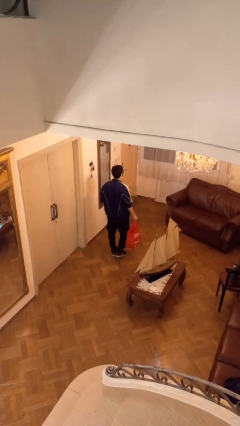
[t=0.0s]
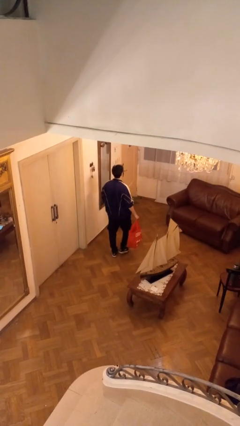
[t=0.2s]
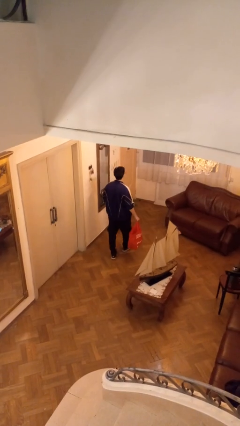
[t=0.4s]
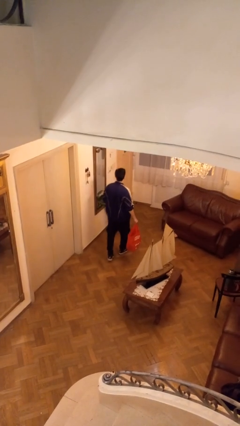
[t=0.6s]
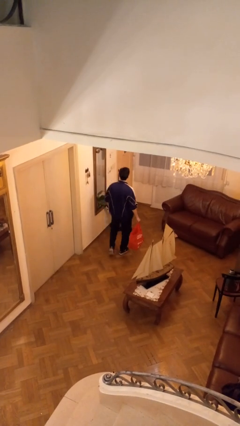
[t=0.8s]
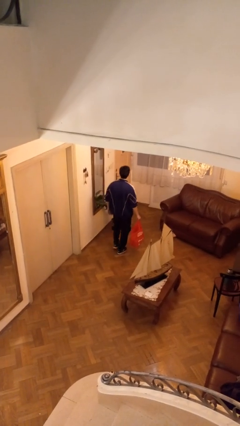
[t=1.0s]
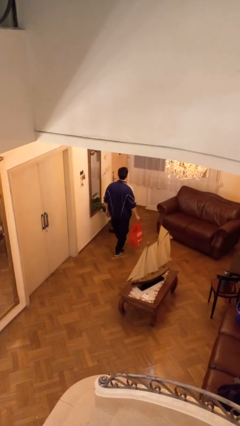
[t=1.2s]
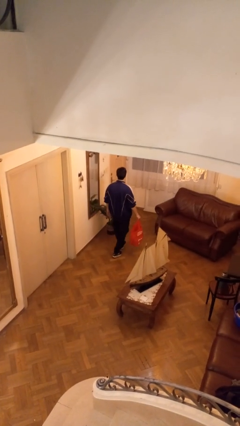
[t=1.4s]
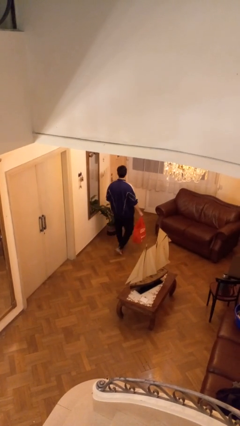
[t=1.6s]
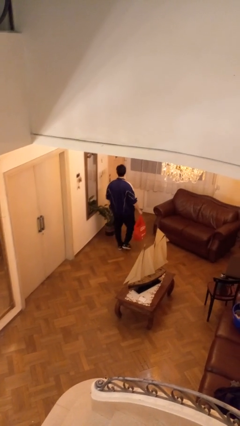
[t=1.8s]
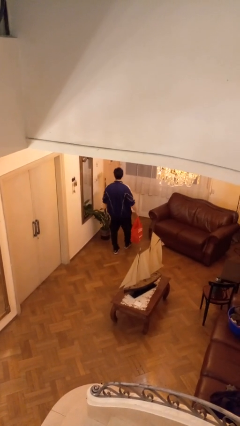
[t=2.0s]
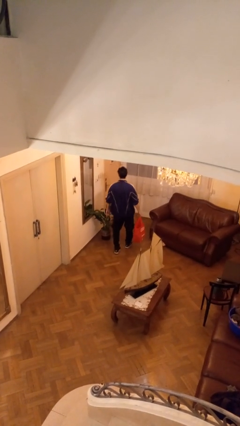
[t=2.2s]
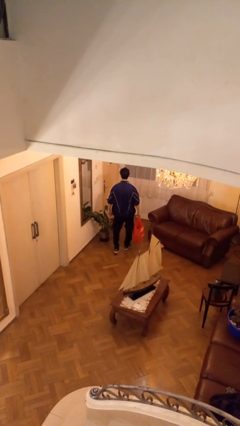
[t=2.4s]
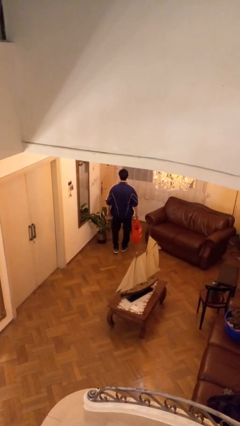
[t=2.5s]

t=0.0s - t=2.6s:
person carries groceries

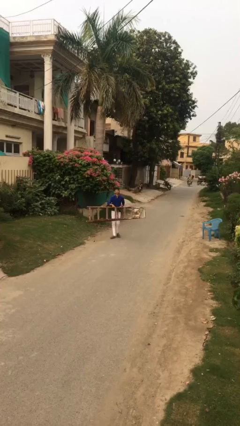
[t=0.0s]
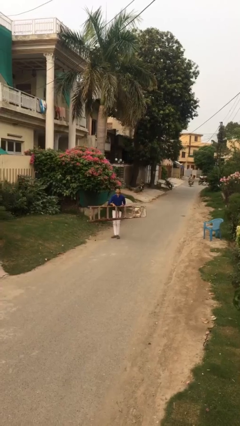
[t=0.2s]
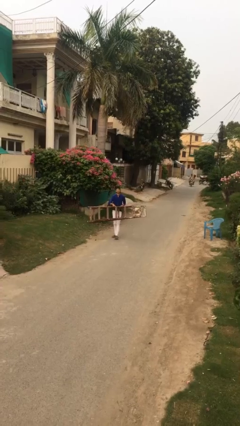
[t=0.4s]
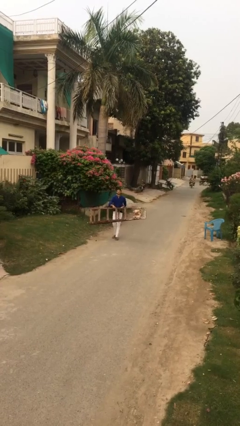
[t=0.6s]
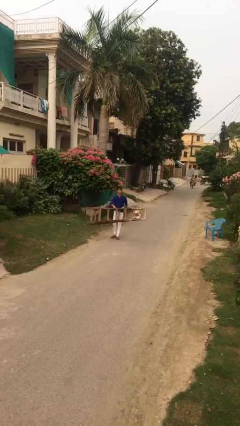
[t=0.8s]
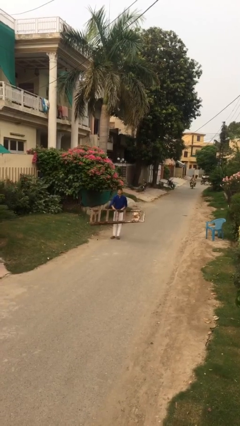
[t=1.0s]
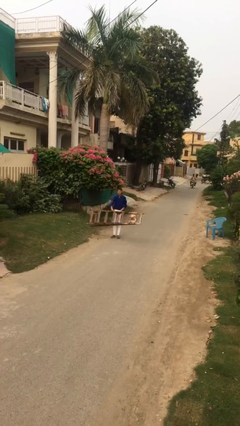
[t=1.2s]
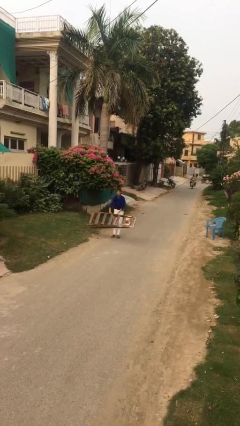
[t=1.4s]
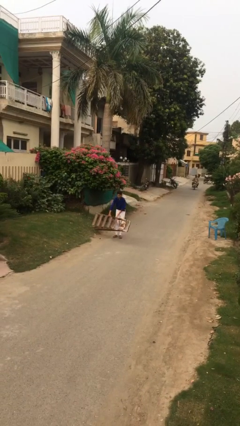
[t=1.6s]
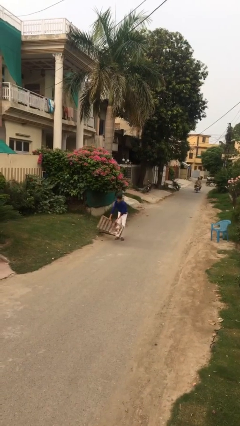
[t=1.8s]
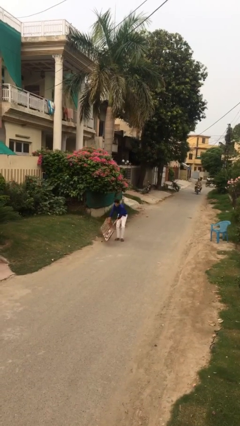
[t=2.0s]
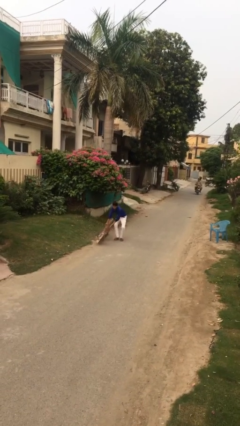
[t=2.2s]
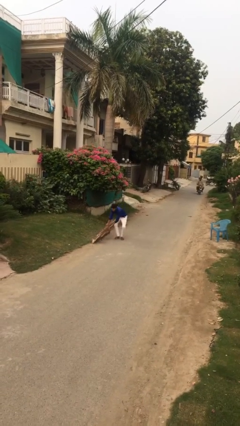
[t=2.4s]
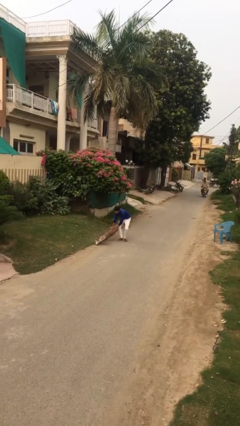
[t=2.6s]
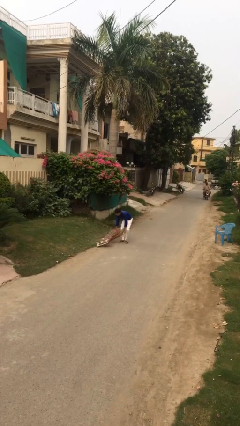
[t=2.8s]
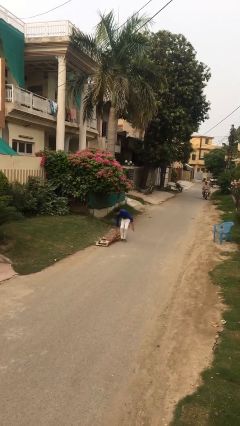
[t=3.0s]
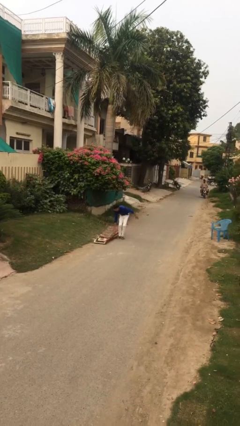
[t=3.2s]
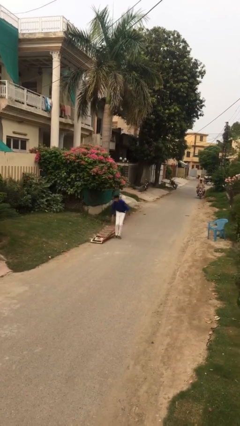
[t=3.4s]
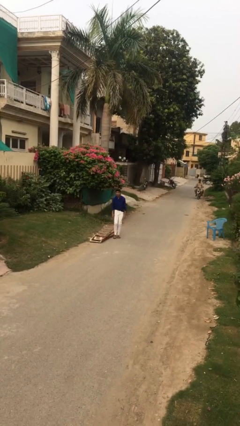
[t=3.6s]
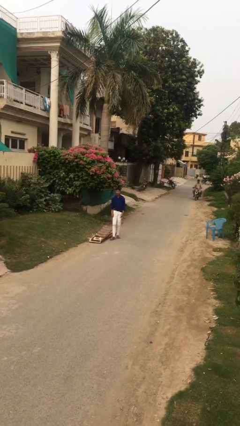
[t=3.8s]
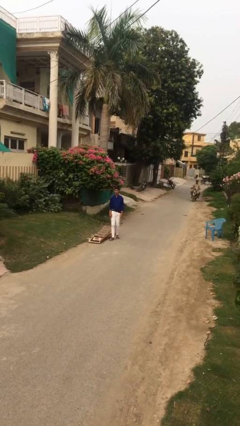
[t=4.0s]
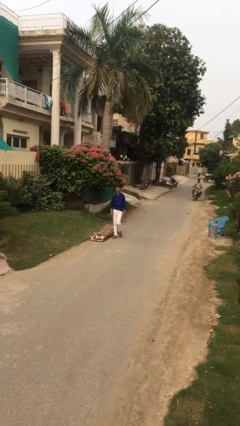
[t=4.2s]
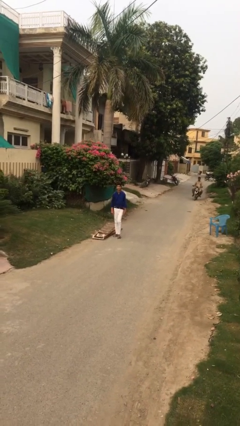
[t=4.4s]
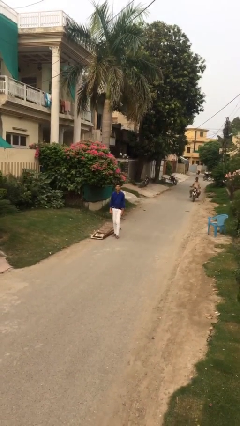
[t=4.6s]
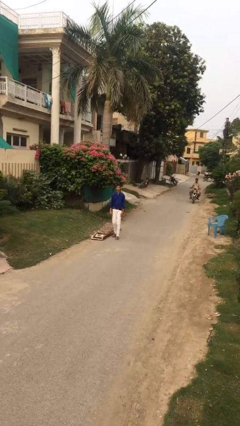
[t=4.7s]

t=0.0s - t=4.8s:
person puts down object on floor

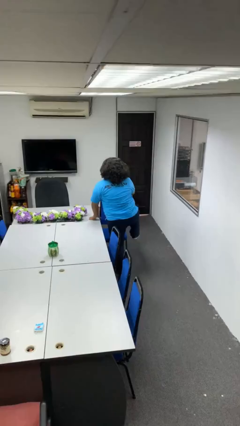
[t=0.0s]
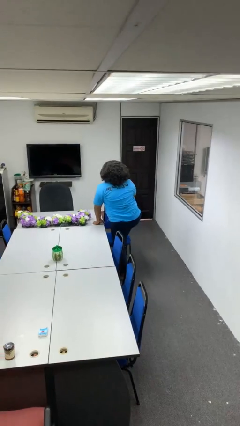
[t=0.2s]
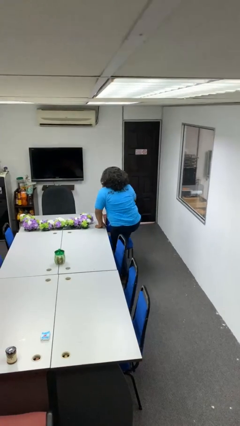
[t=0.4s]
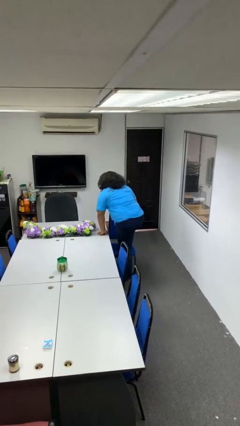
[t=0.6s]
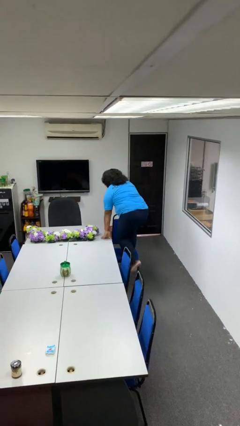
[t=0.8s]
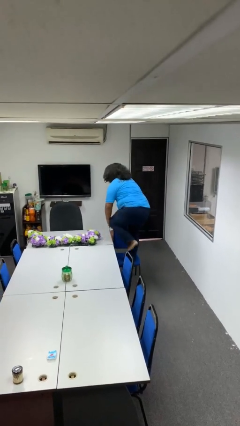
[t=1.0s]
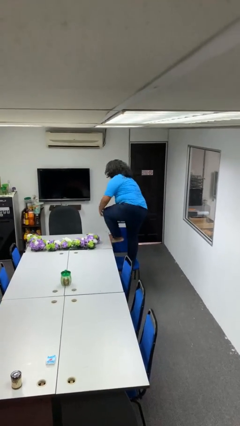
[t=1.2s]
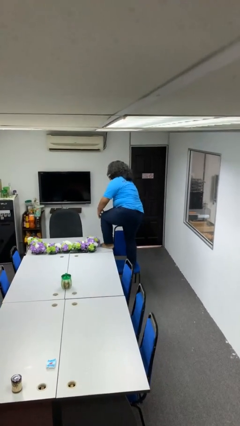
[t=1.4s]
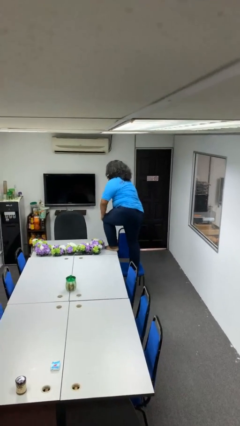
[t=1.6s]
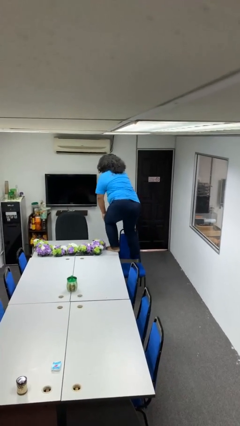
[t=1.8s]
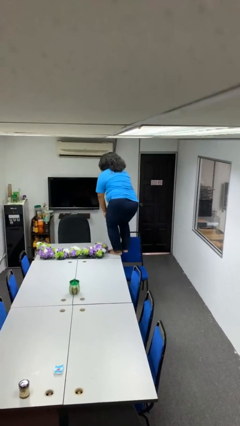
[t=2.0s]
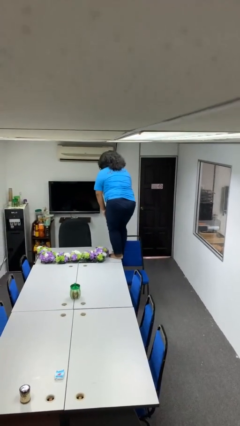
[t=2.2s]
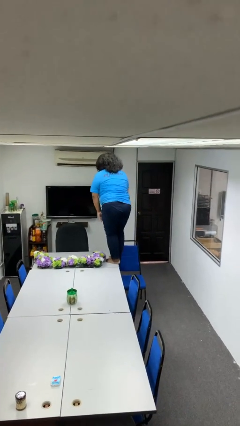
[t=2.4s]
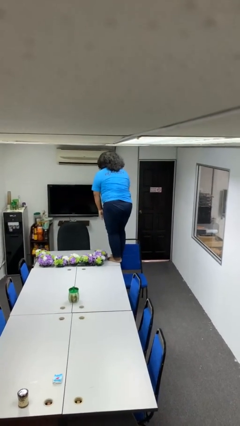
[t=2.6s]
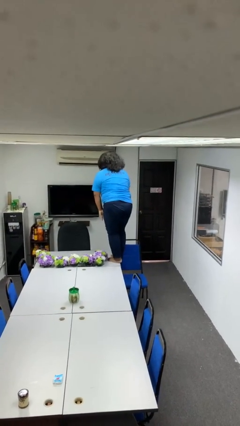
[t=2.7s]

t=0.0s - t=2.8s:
person climbs on table

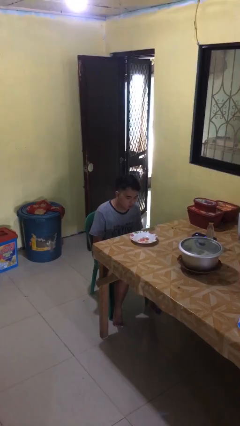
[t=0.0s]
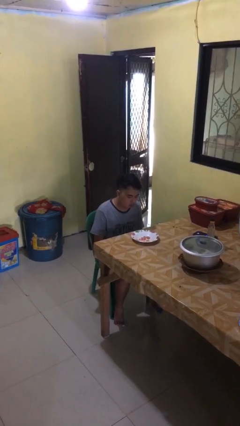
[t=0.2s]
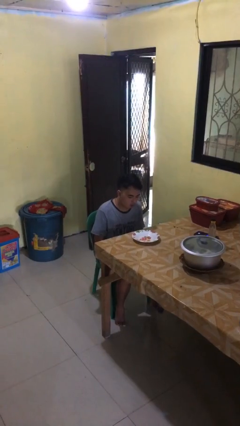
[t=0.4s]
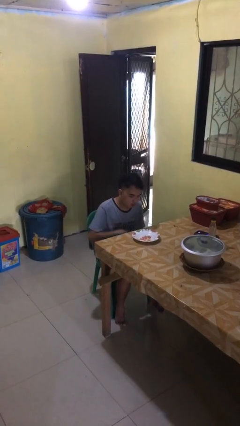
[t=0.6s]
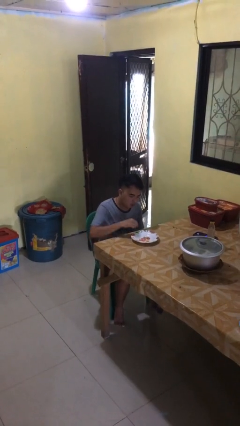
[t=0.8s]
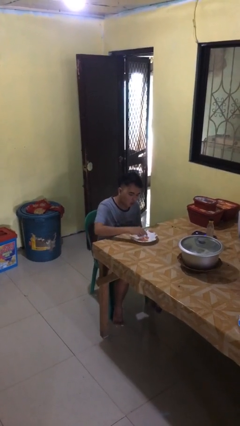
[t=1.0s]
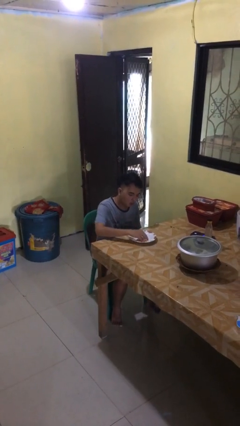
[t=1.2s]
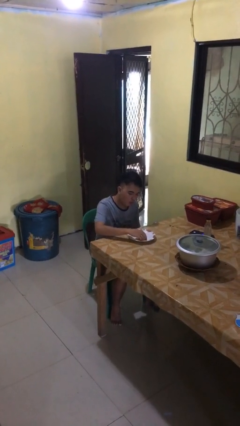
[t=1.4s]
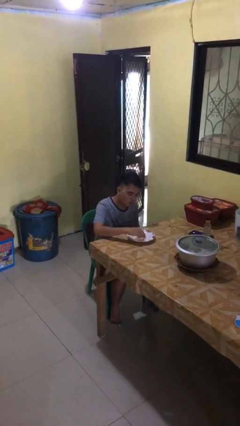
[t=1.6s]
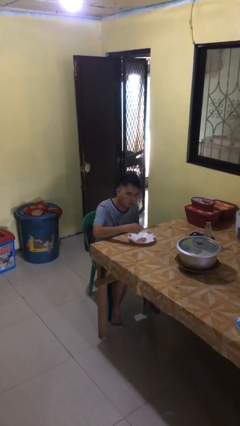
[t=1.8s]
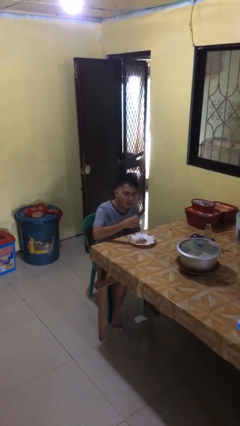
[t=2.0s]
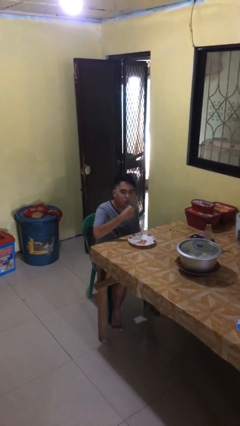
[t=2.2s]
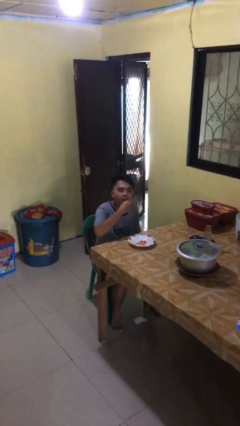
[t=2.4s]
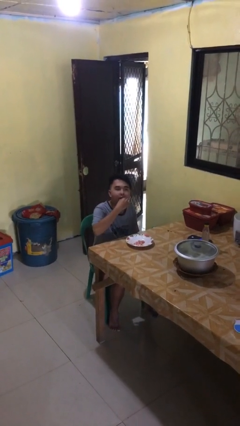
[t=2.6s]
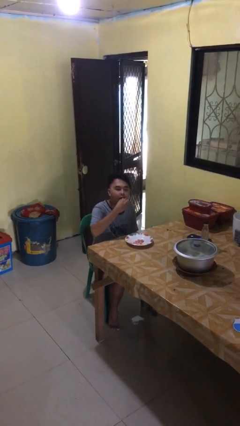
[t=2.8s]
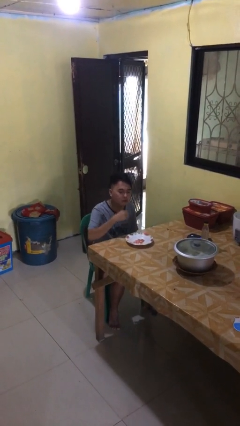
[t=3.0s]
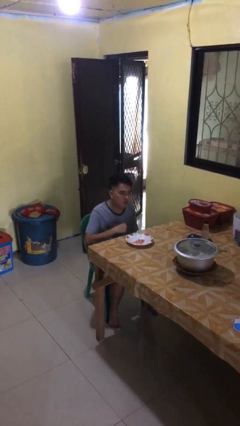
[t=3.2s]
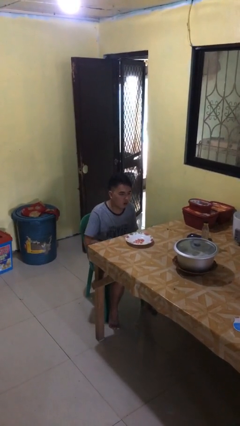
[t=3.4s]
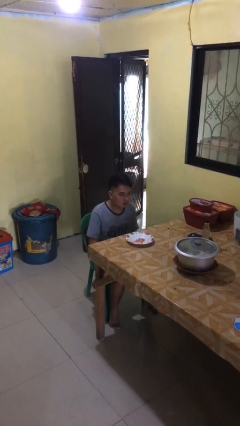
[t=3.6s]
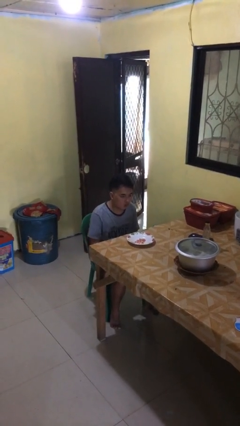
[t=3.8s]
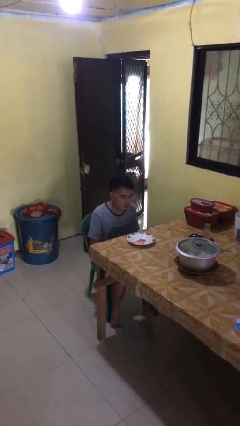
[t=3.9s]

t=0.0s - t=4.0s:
person eats with hands

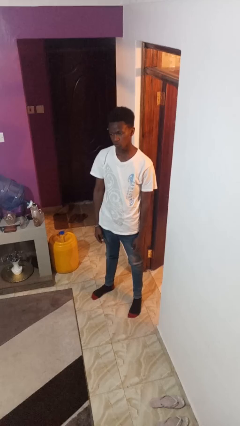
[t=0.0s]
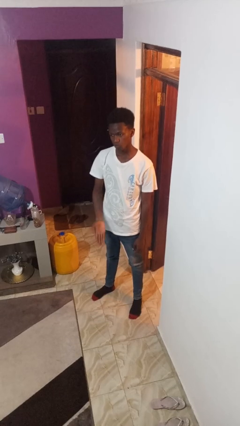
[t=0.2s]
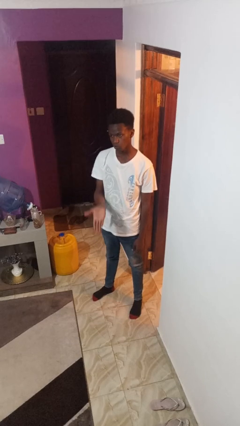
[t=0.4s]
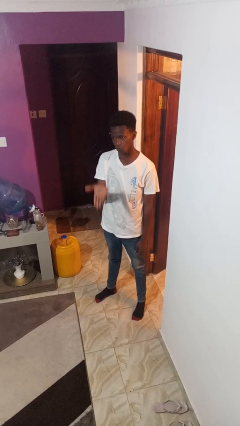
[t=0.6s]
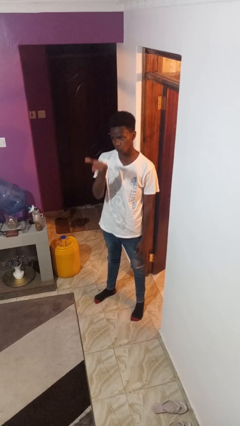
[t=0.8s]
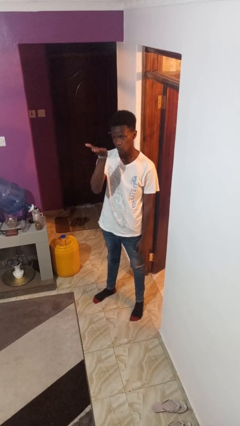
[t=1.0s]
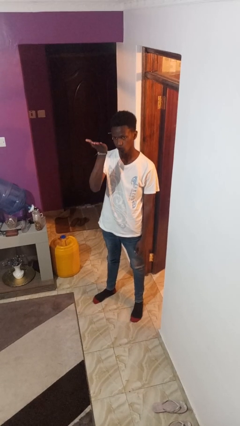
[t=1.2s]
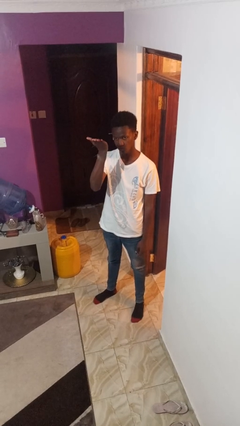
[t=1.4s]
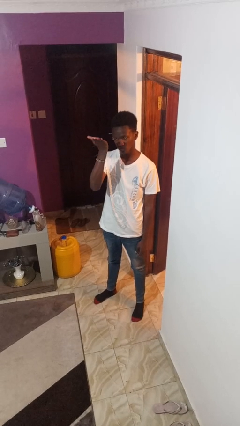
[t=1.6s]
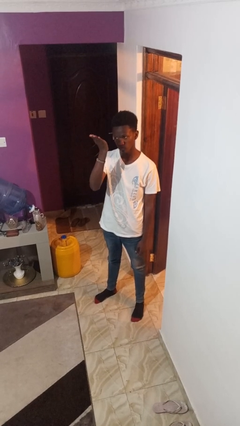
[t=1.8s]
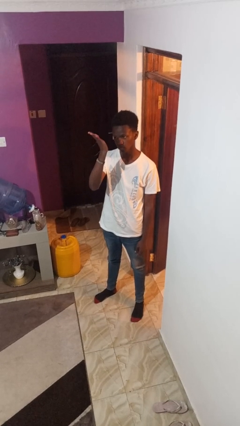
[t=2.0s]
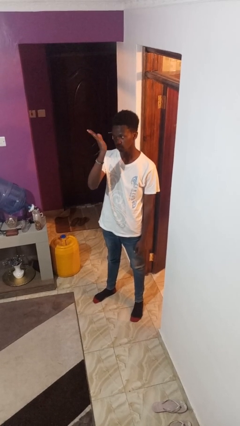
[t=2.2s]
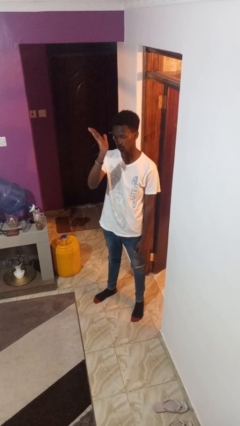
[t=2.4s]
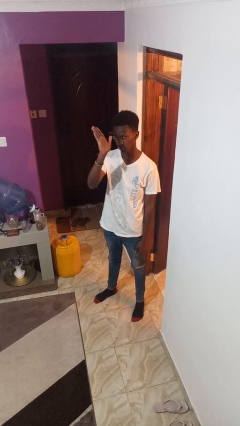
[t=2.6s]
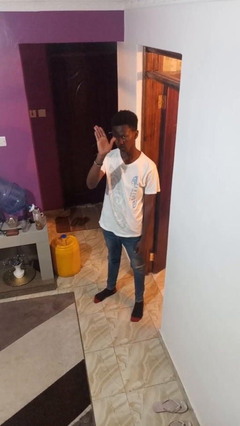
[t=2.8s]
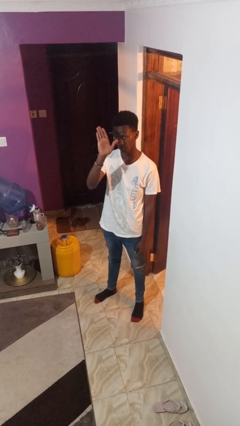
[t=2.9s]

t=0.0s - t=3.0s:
person gestures swipe up

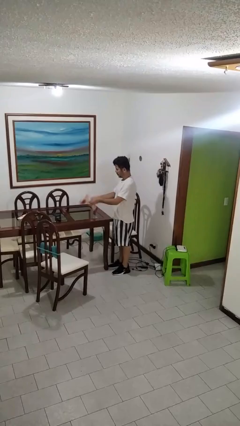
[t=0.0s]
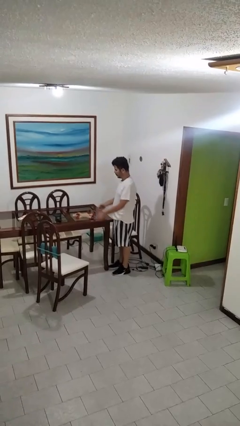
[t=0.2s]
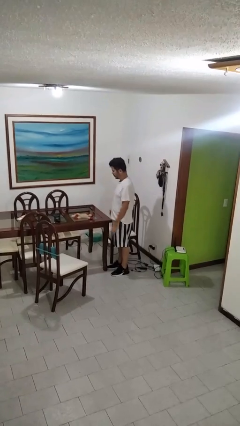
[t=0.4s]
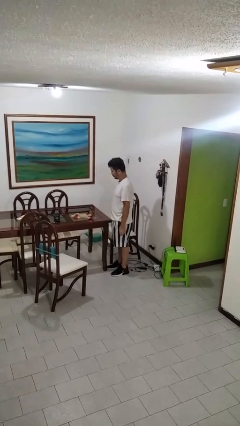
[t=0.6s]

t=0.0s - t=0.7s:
person throws object on table
